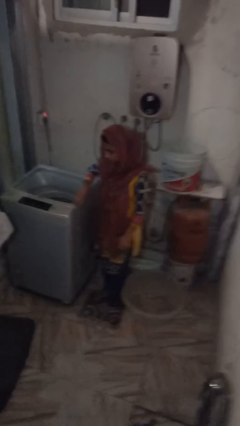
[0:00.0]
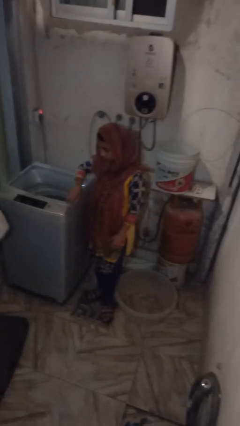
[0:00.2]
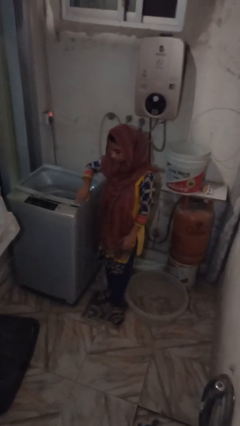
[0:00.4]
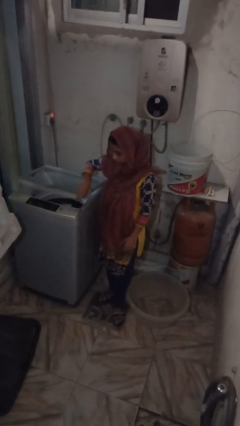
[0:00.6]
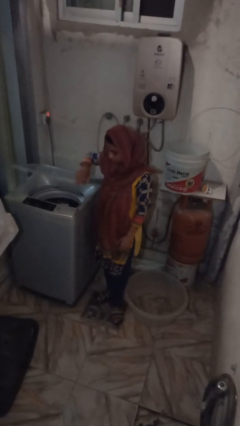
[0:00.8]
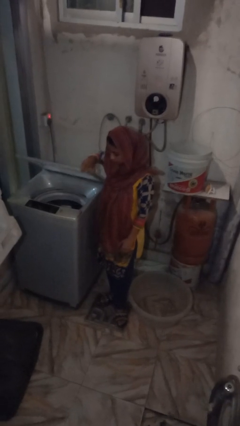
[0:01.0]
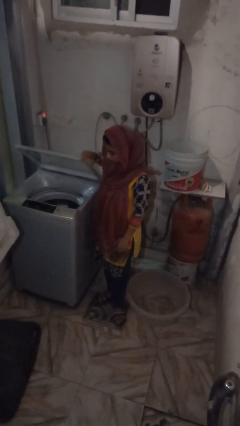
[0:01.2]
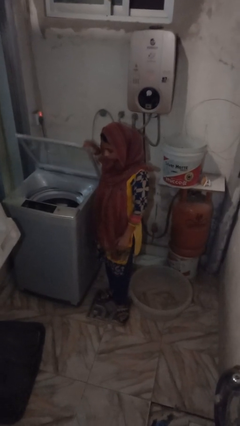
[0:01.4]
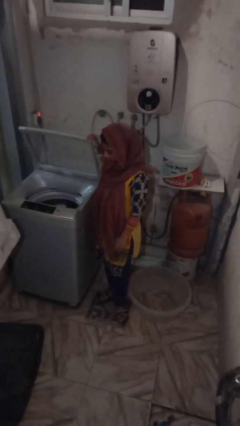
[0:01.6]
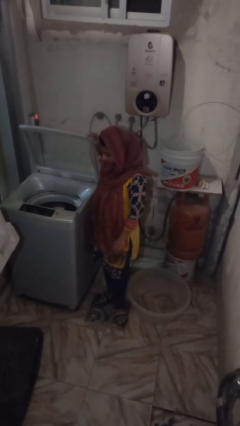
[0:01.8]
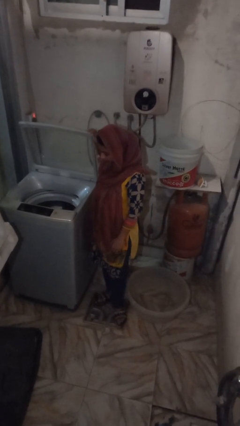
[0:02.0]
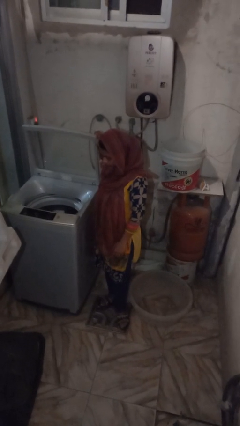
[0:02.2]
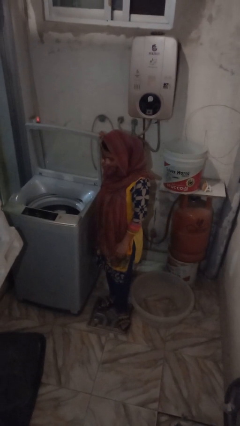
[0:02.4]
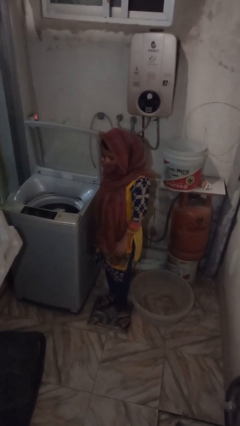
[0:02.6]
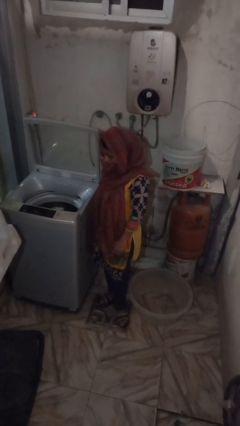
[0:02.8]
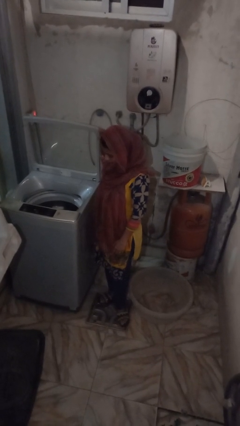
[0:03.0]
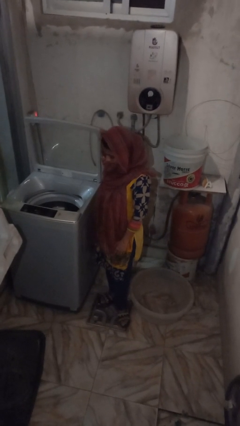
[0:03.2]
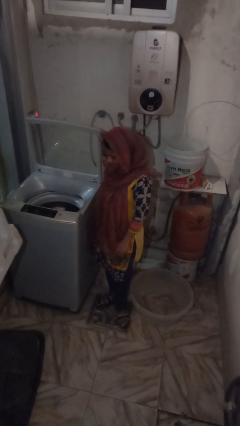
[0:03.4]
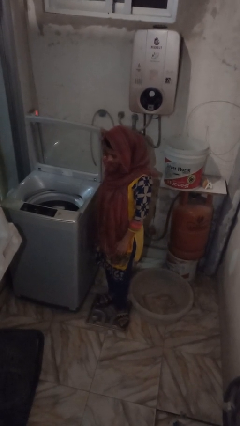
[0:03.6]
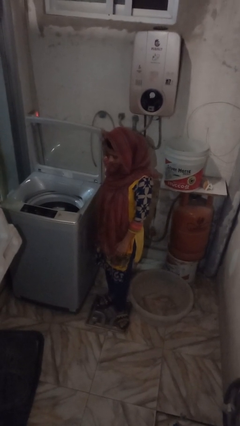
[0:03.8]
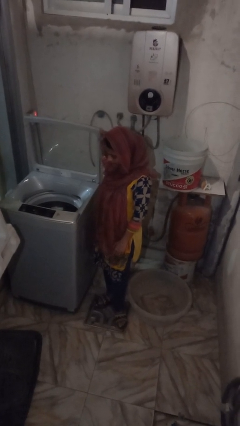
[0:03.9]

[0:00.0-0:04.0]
person opens clothes washer

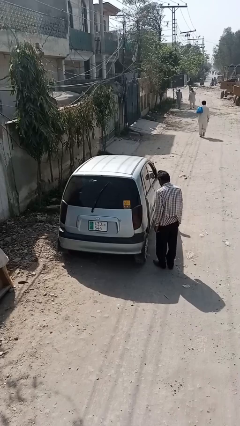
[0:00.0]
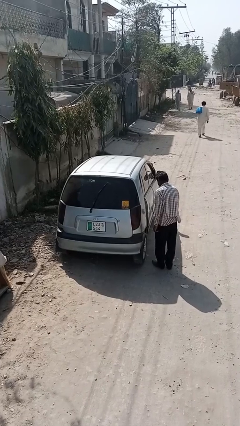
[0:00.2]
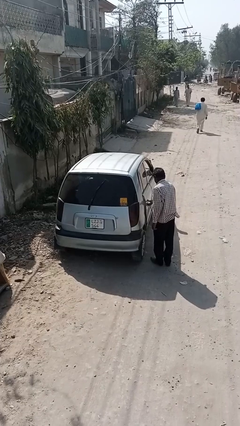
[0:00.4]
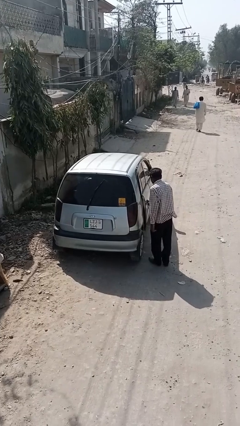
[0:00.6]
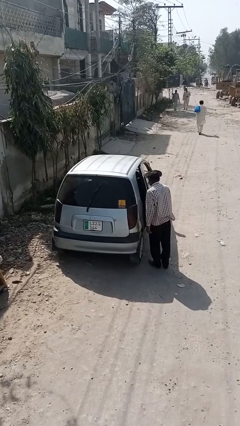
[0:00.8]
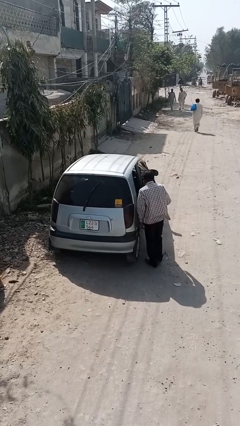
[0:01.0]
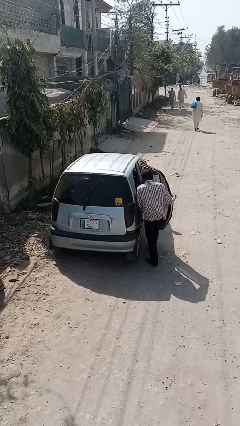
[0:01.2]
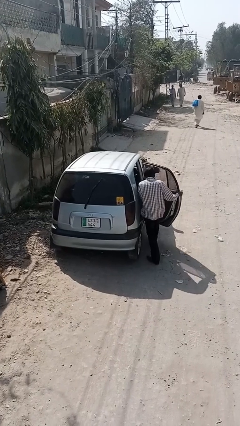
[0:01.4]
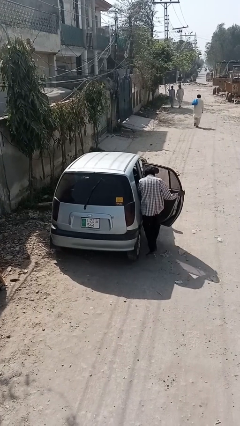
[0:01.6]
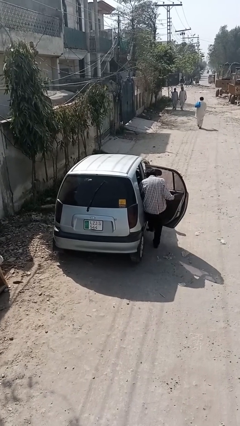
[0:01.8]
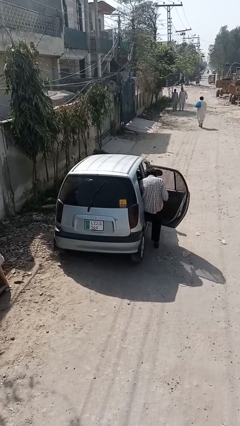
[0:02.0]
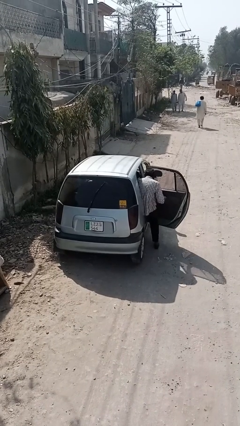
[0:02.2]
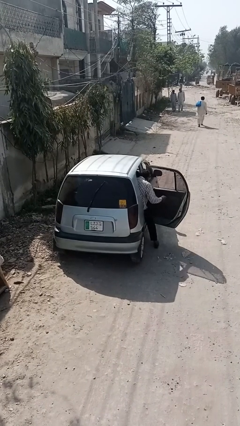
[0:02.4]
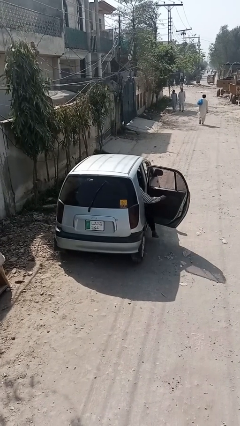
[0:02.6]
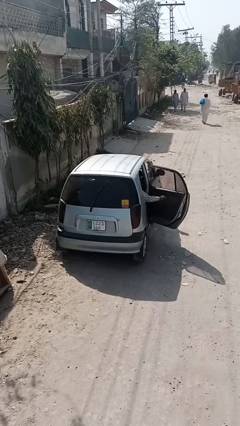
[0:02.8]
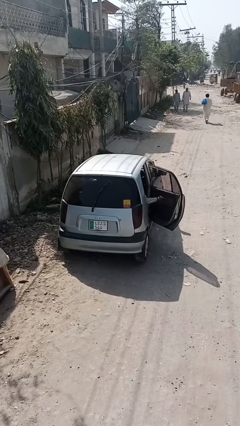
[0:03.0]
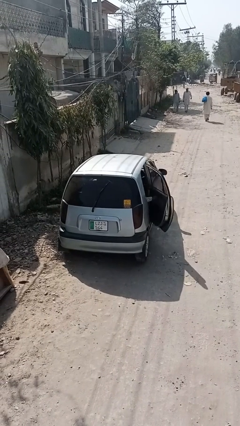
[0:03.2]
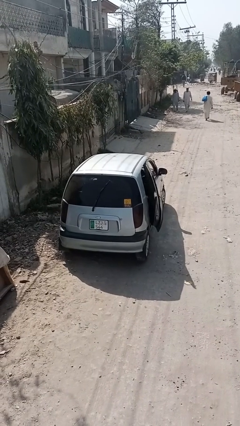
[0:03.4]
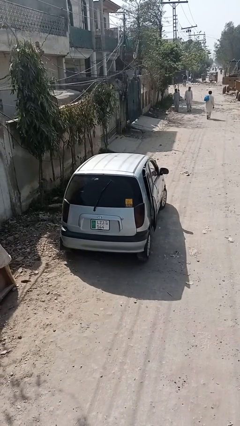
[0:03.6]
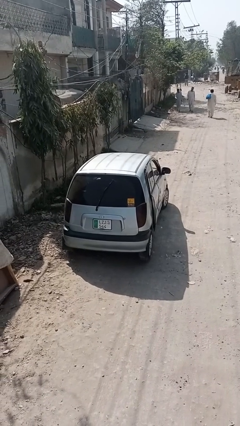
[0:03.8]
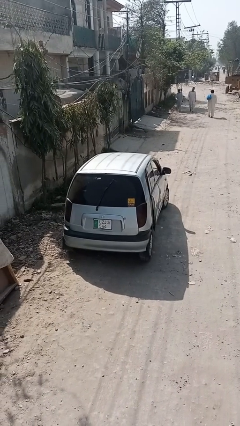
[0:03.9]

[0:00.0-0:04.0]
car picks up person

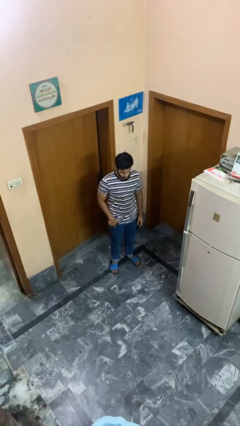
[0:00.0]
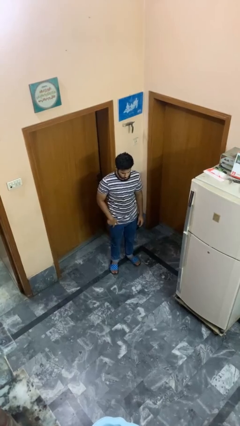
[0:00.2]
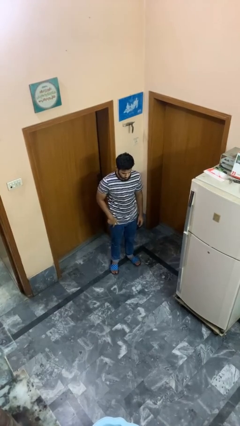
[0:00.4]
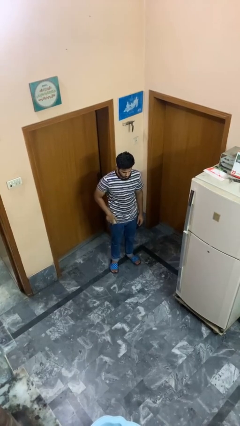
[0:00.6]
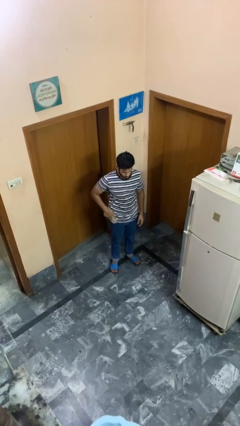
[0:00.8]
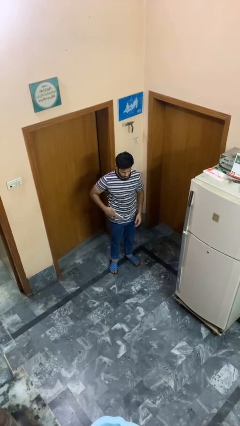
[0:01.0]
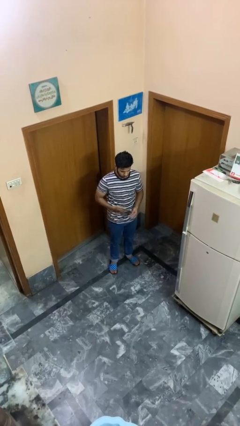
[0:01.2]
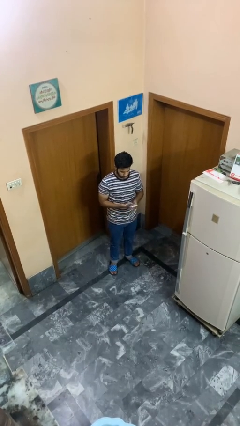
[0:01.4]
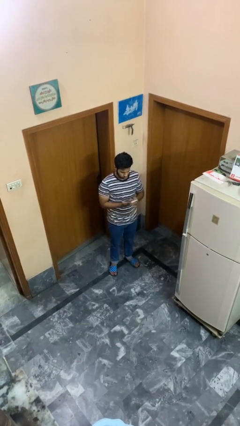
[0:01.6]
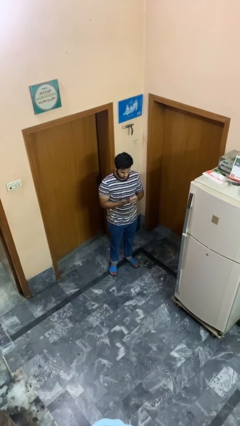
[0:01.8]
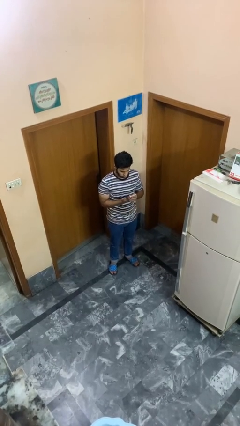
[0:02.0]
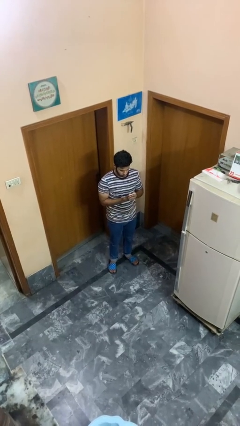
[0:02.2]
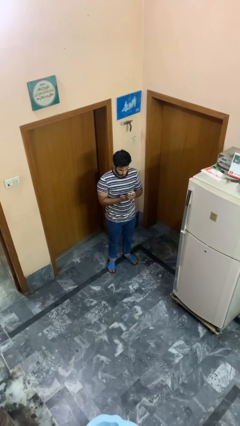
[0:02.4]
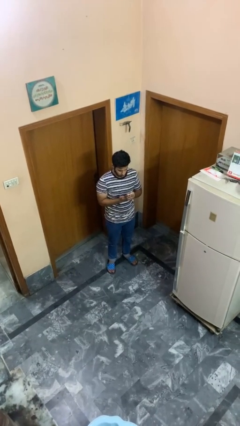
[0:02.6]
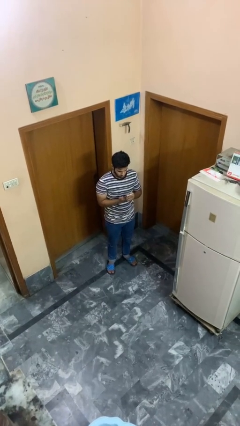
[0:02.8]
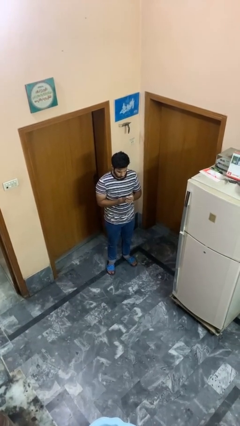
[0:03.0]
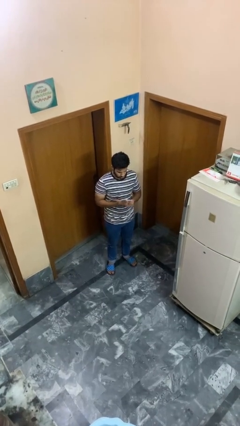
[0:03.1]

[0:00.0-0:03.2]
person takes phone from pocket

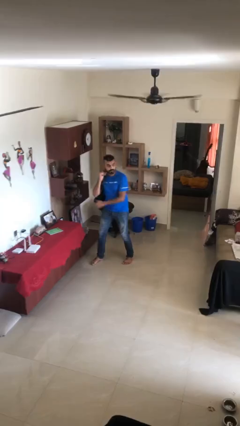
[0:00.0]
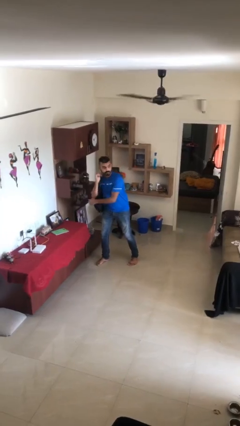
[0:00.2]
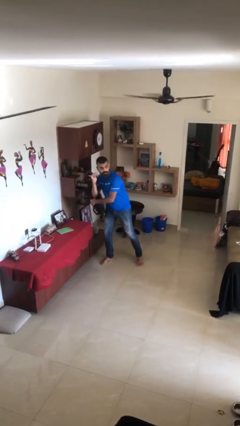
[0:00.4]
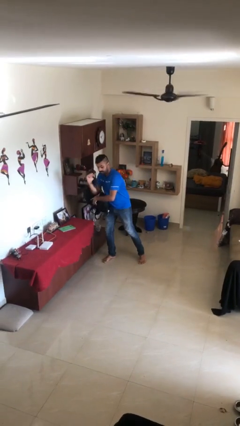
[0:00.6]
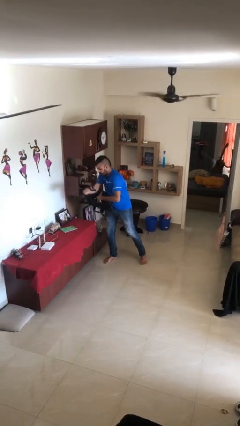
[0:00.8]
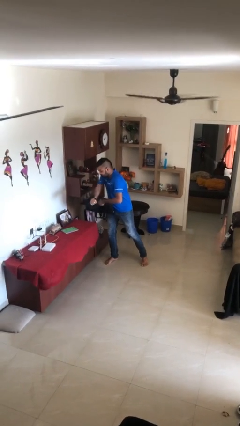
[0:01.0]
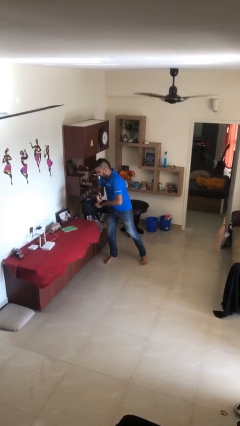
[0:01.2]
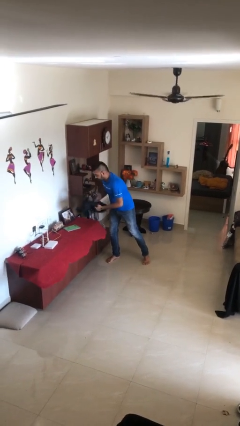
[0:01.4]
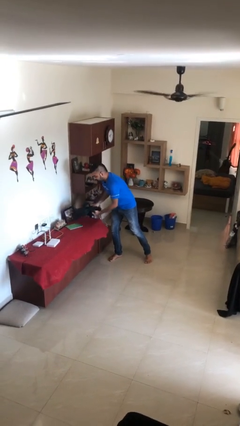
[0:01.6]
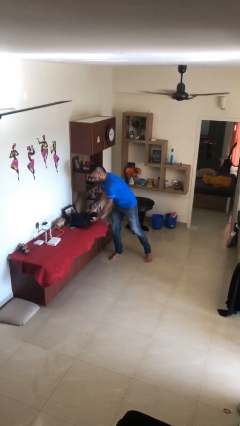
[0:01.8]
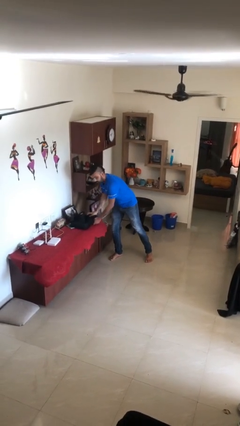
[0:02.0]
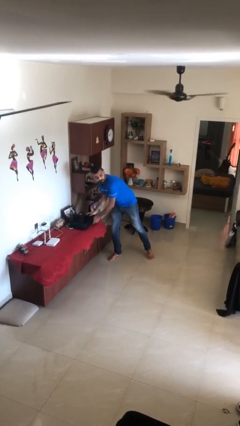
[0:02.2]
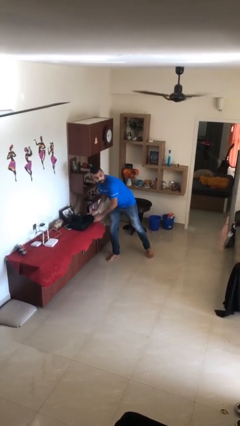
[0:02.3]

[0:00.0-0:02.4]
person puts down object on table

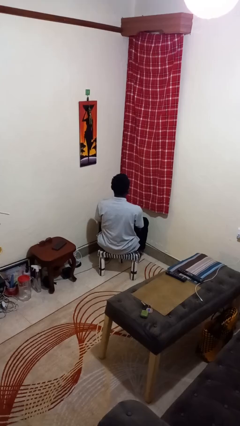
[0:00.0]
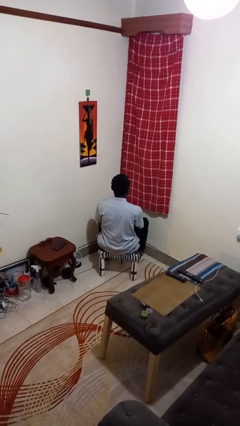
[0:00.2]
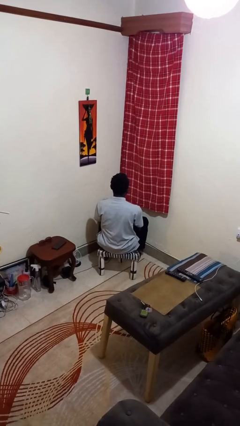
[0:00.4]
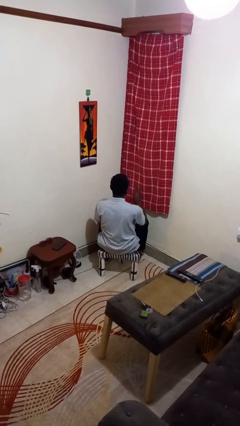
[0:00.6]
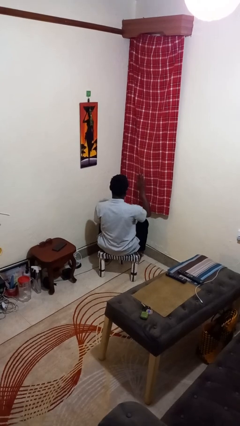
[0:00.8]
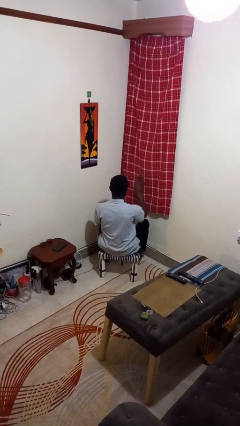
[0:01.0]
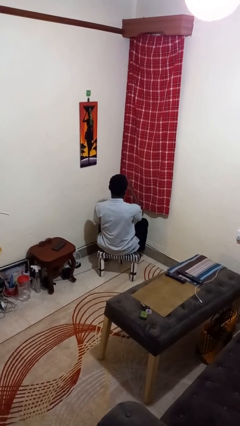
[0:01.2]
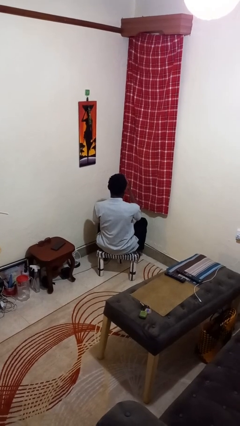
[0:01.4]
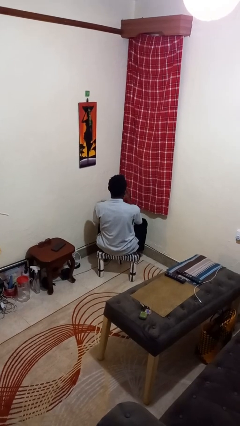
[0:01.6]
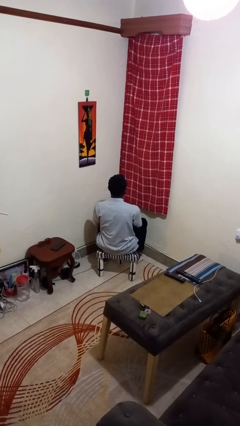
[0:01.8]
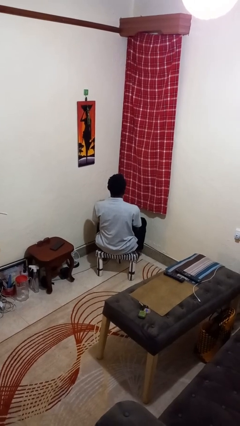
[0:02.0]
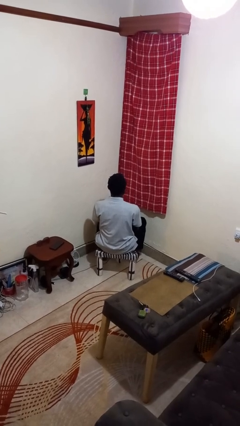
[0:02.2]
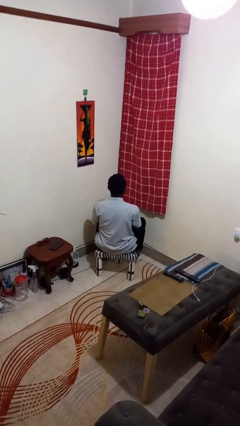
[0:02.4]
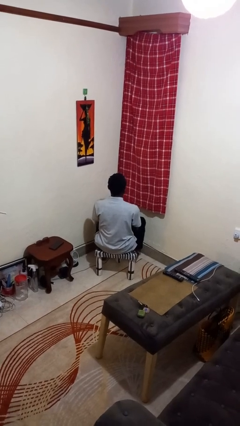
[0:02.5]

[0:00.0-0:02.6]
person gestures swipe left

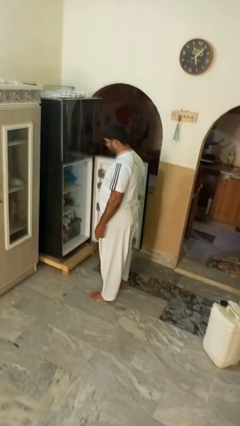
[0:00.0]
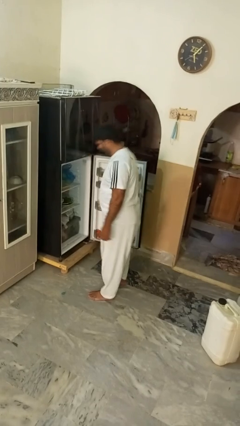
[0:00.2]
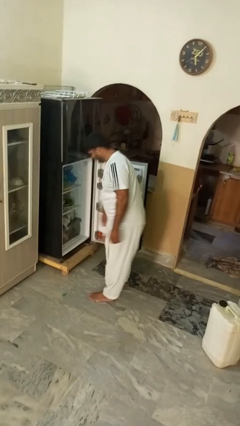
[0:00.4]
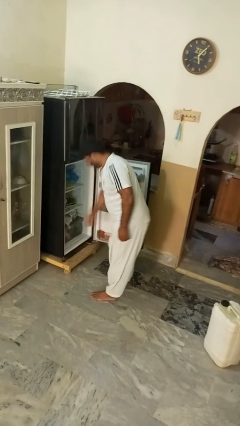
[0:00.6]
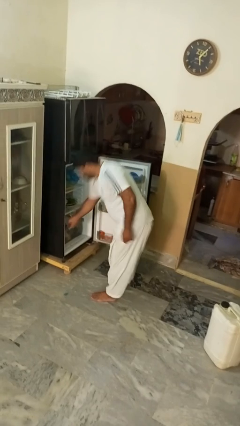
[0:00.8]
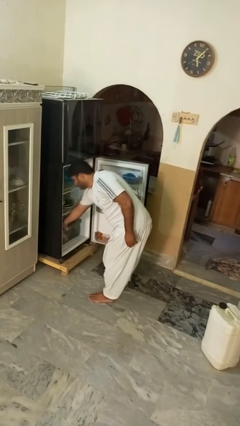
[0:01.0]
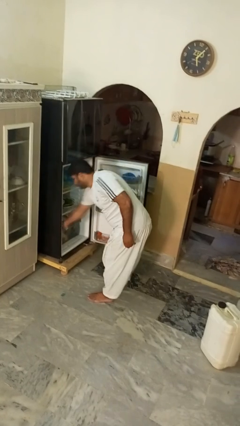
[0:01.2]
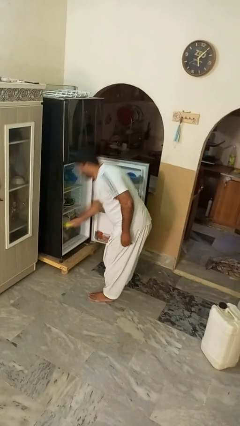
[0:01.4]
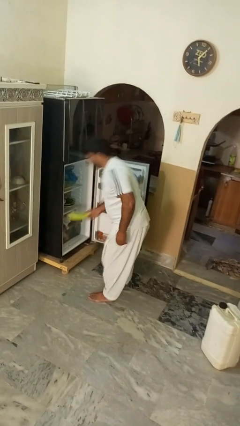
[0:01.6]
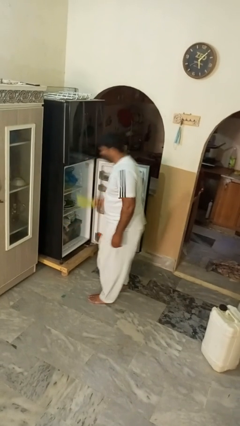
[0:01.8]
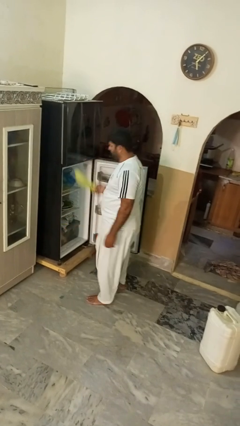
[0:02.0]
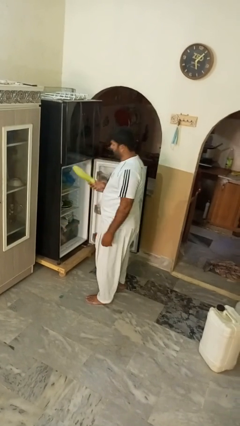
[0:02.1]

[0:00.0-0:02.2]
person takes object from refrigerator
